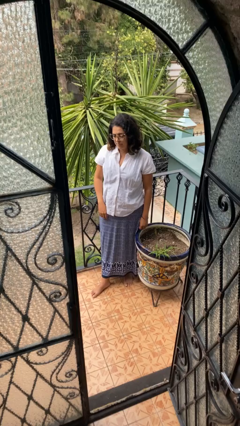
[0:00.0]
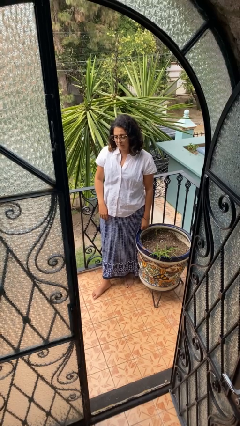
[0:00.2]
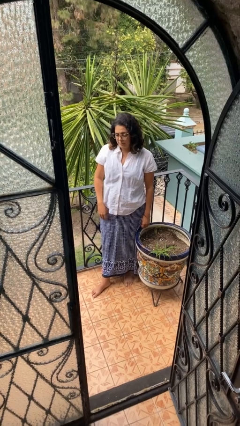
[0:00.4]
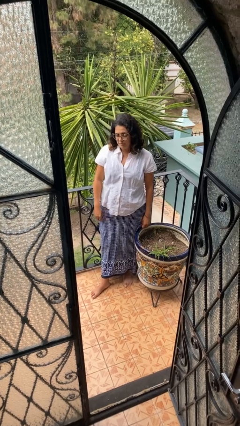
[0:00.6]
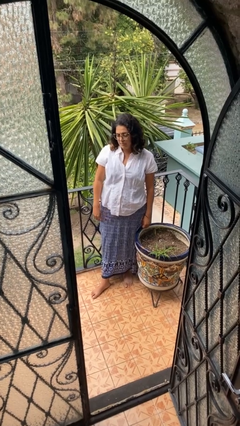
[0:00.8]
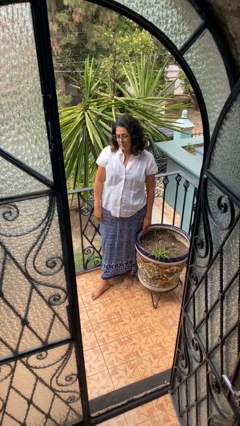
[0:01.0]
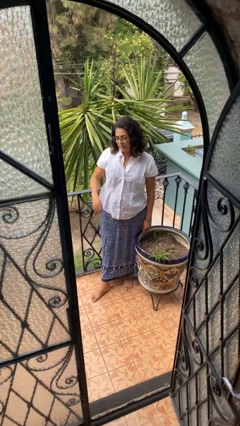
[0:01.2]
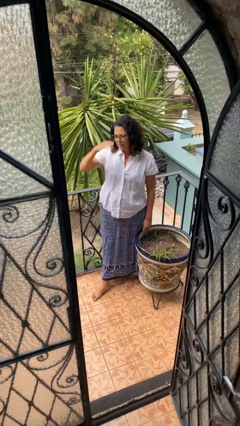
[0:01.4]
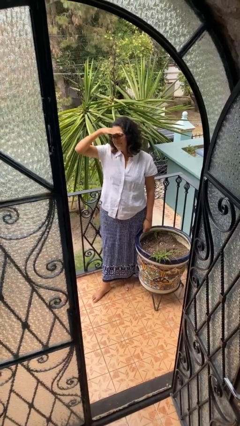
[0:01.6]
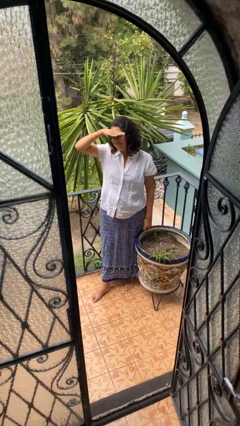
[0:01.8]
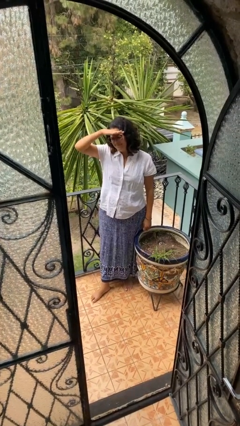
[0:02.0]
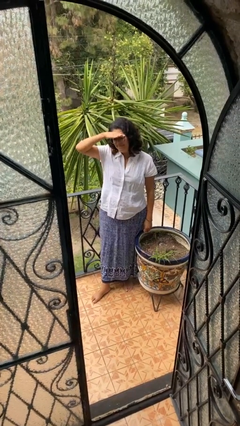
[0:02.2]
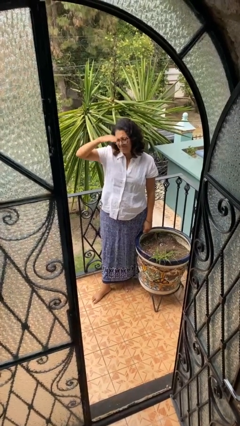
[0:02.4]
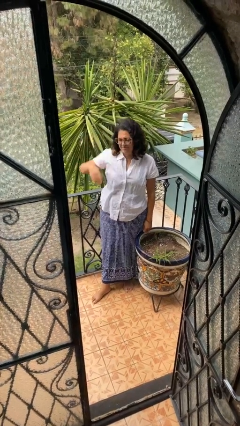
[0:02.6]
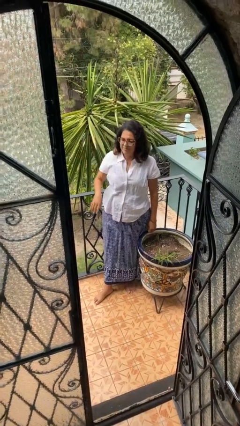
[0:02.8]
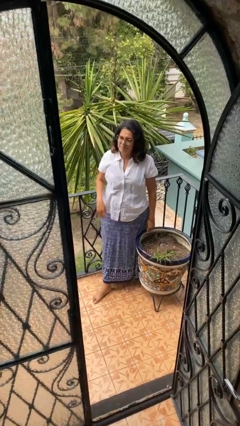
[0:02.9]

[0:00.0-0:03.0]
person shades eyes

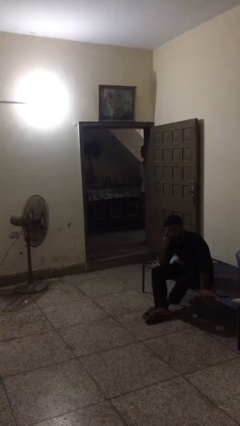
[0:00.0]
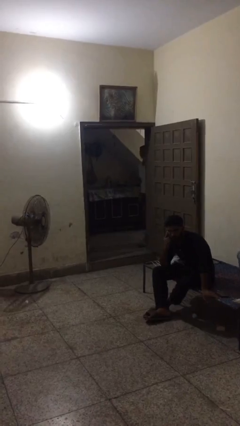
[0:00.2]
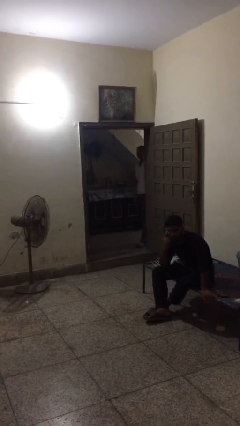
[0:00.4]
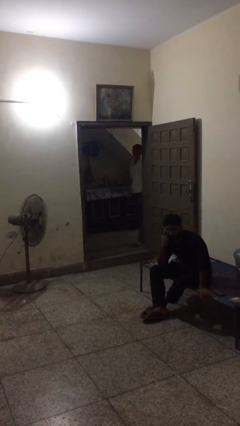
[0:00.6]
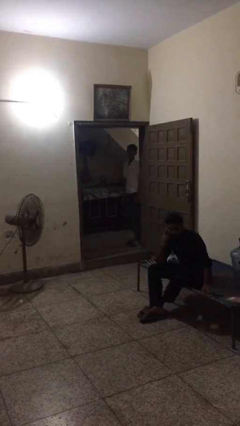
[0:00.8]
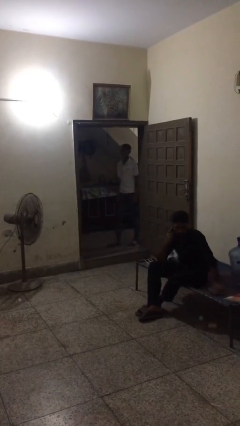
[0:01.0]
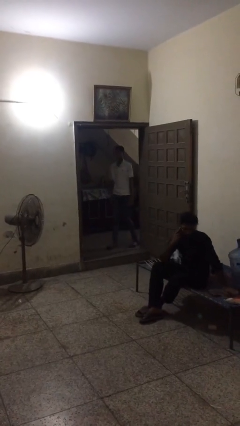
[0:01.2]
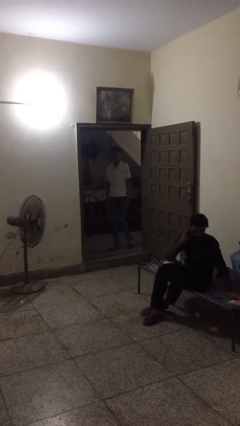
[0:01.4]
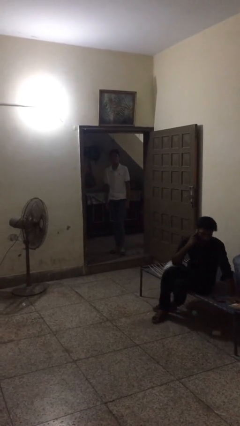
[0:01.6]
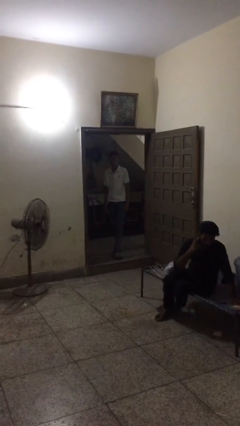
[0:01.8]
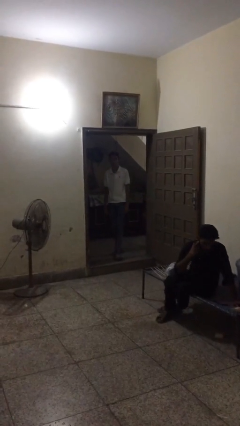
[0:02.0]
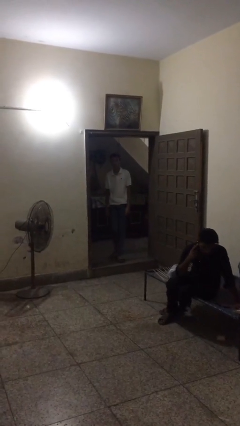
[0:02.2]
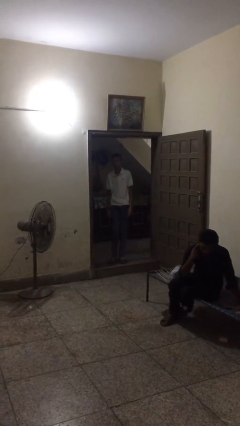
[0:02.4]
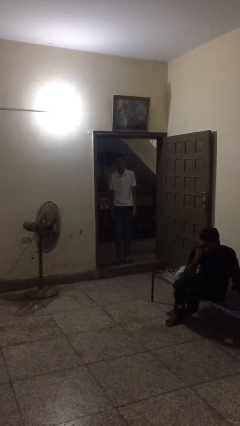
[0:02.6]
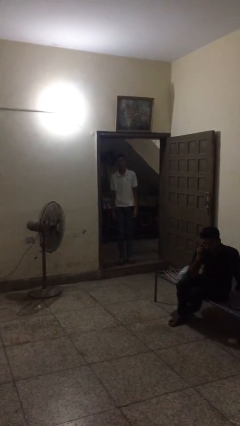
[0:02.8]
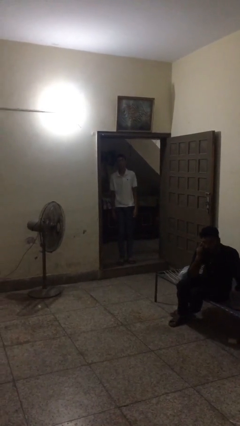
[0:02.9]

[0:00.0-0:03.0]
person enters scene through structure

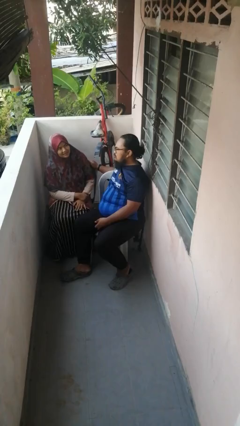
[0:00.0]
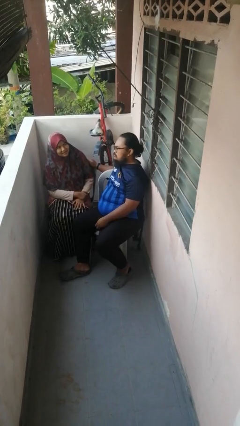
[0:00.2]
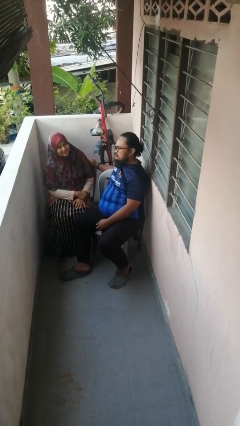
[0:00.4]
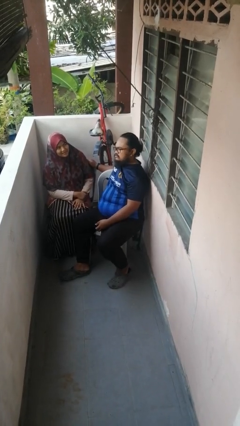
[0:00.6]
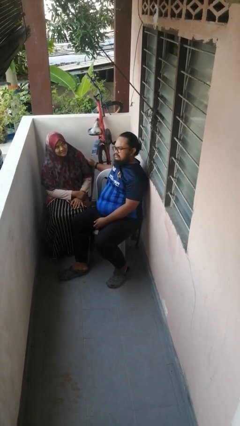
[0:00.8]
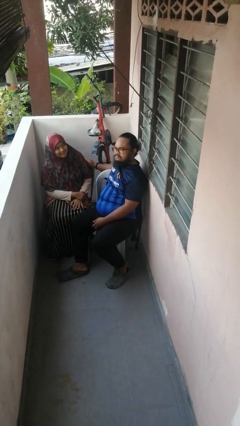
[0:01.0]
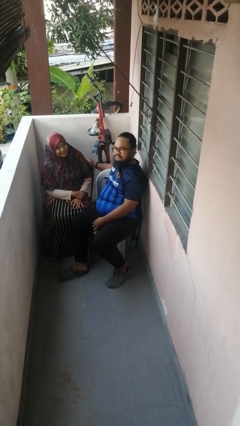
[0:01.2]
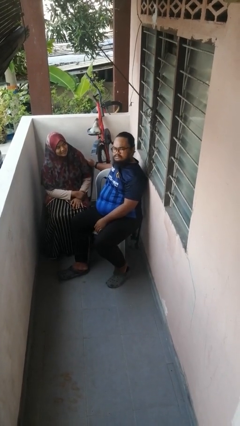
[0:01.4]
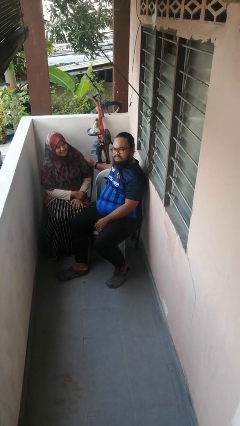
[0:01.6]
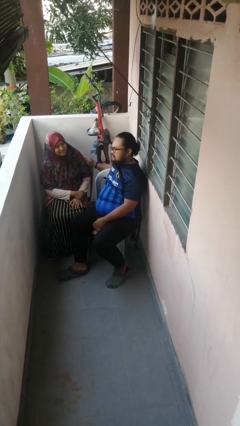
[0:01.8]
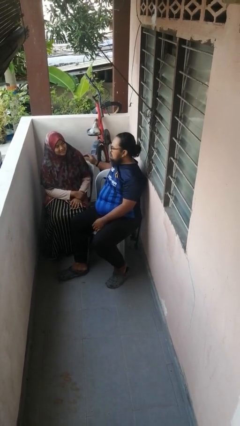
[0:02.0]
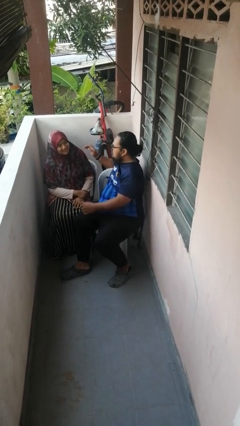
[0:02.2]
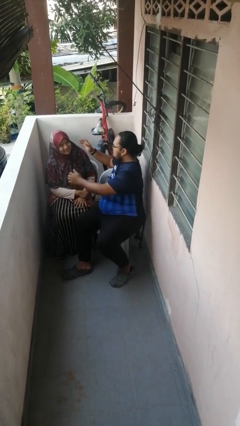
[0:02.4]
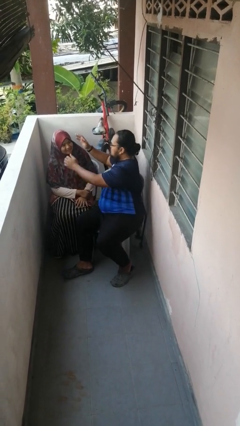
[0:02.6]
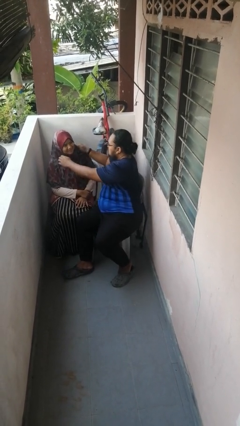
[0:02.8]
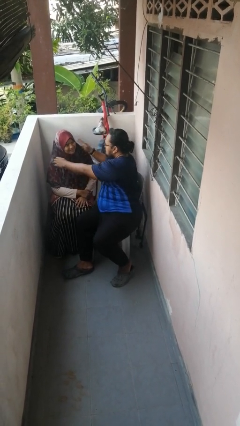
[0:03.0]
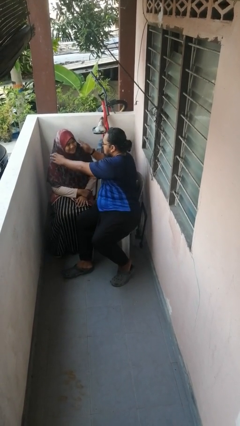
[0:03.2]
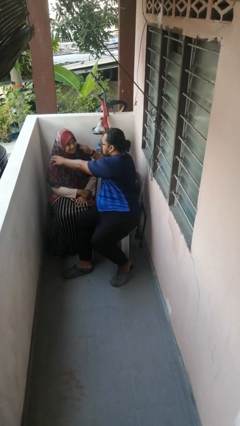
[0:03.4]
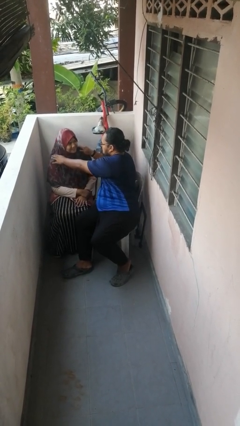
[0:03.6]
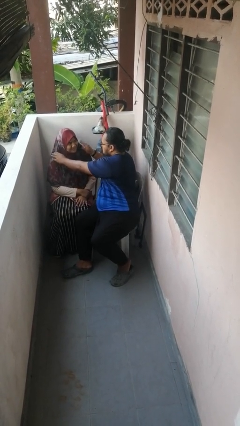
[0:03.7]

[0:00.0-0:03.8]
person pounds shoulders of person

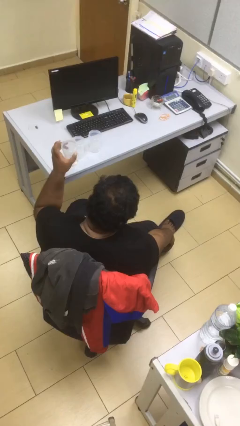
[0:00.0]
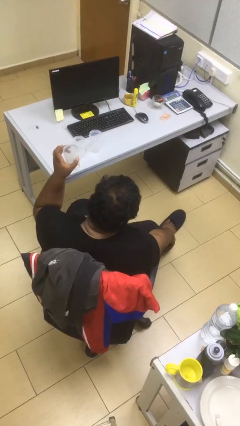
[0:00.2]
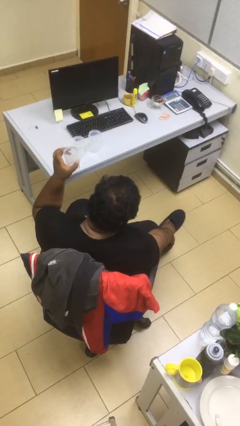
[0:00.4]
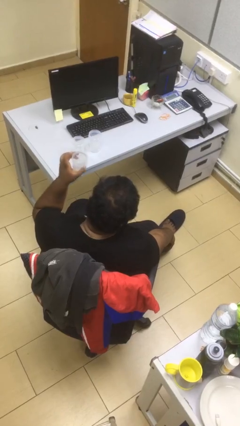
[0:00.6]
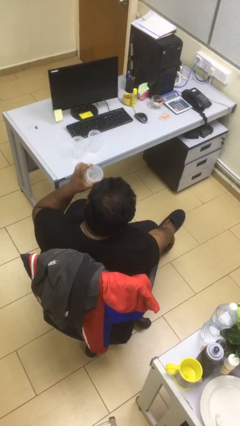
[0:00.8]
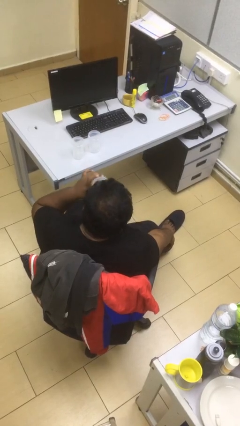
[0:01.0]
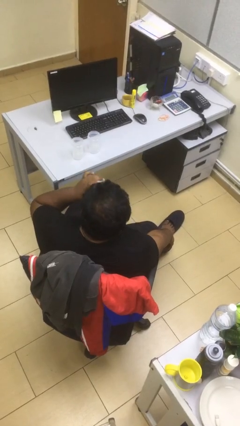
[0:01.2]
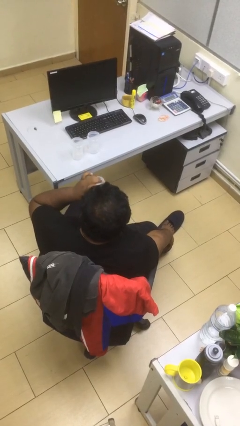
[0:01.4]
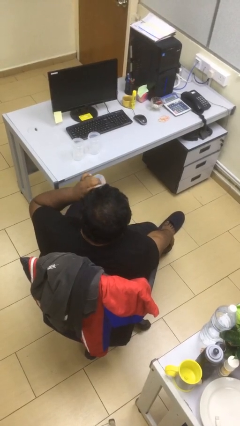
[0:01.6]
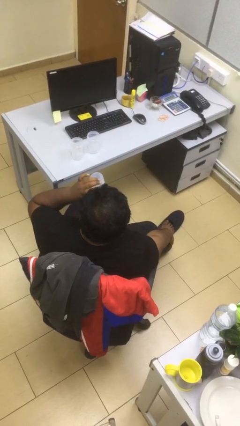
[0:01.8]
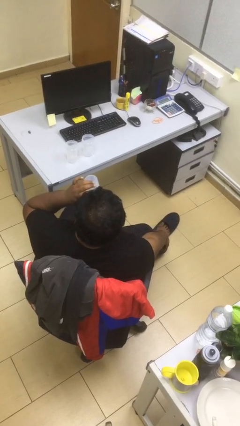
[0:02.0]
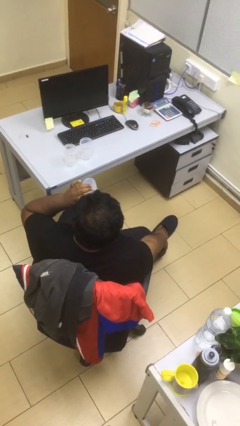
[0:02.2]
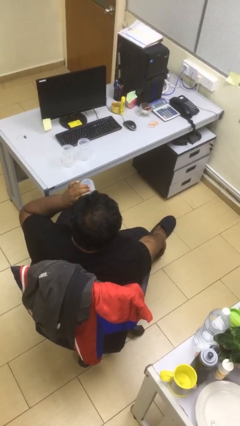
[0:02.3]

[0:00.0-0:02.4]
person drinks from shotglass

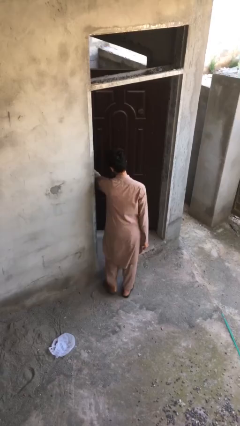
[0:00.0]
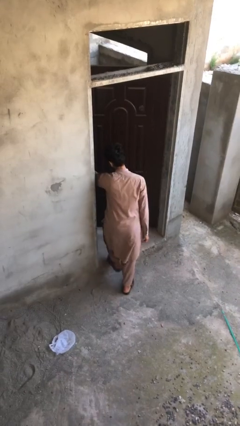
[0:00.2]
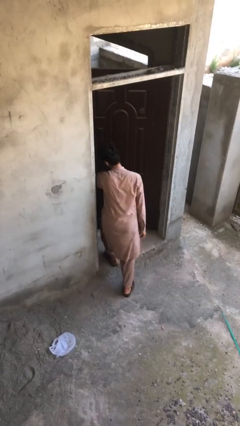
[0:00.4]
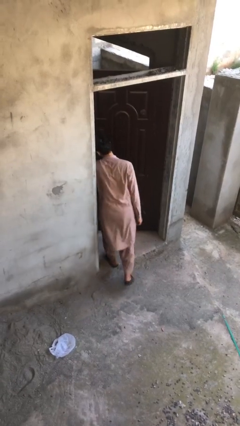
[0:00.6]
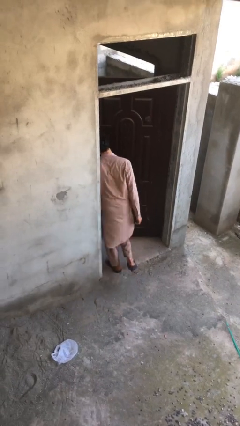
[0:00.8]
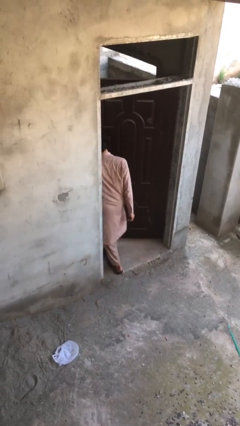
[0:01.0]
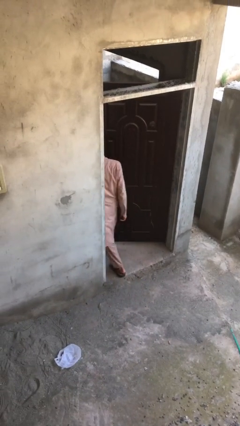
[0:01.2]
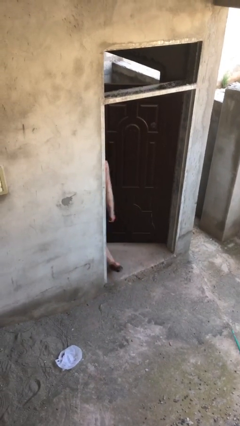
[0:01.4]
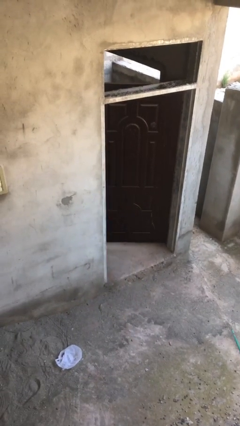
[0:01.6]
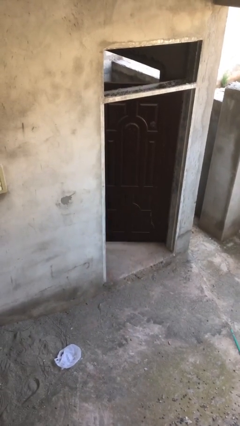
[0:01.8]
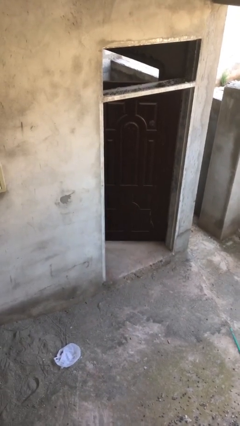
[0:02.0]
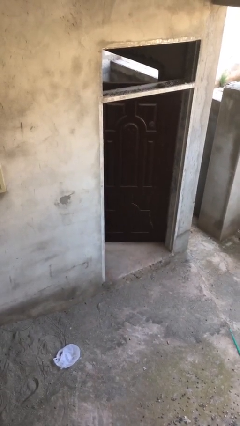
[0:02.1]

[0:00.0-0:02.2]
person exits scene through structure

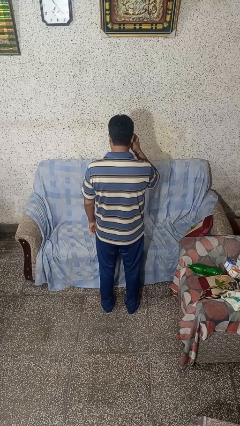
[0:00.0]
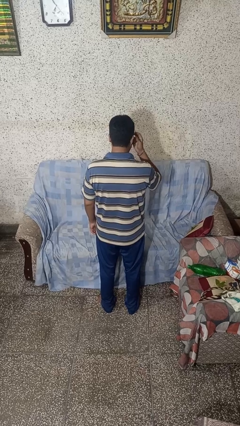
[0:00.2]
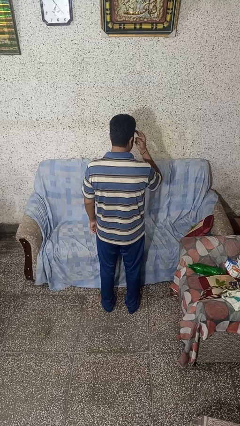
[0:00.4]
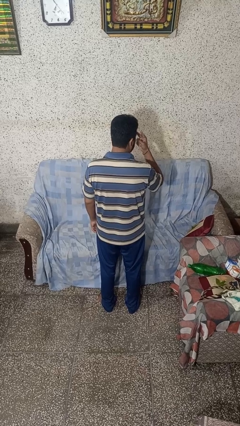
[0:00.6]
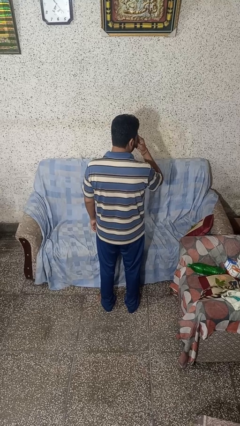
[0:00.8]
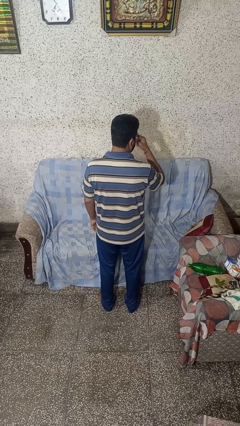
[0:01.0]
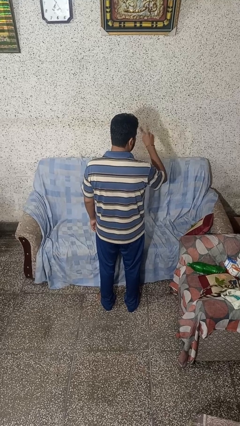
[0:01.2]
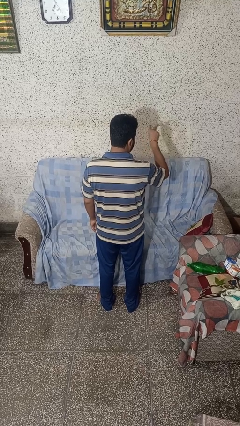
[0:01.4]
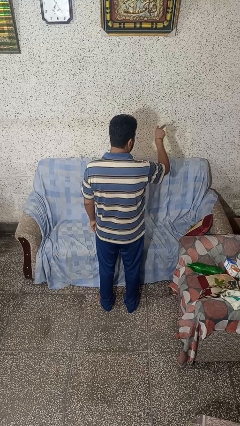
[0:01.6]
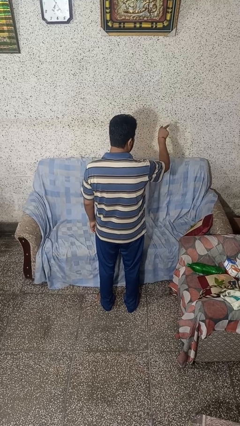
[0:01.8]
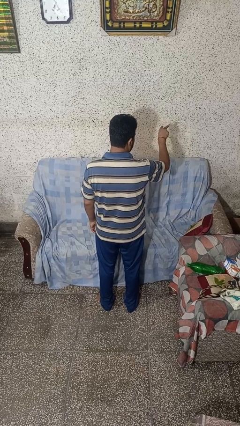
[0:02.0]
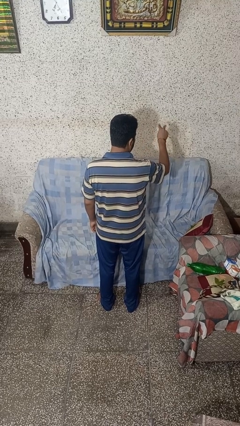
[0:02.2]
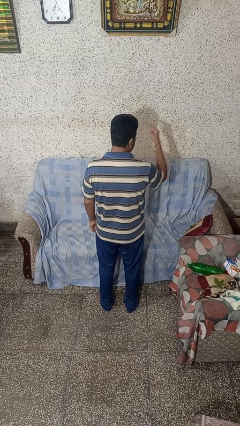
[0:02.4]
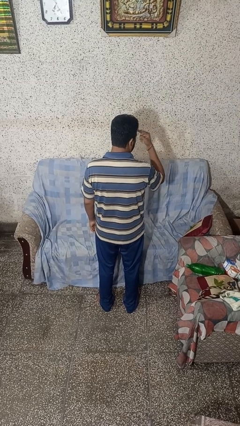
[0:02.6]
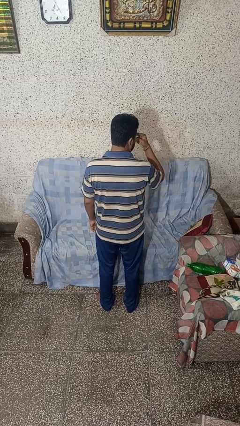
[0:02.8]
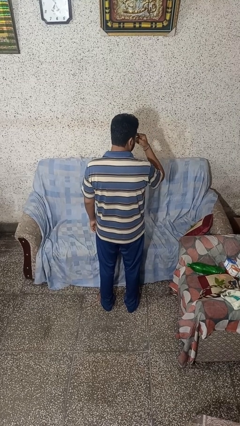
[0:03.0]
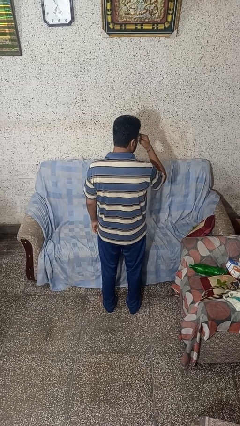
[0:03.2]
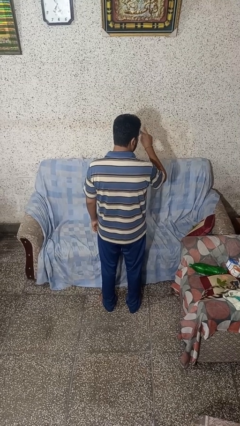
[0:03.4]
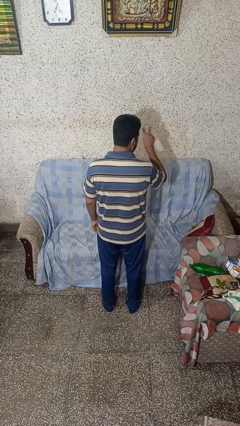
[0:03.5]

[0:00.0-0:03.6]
person gestures watch closely
